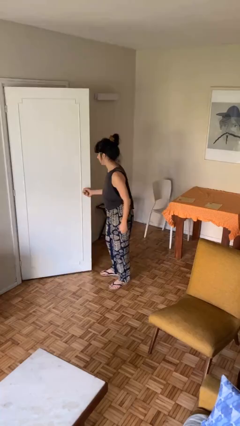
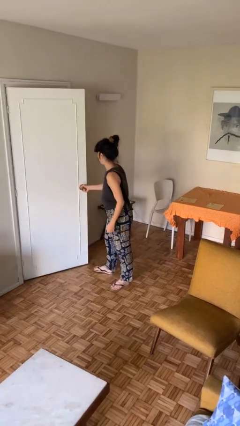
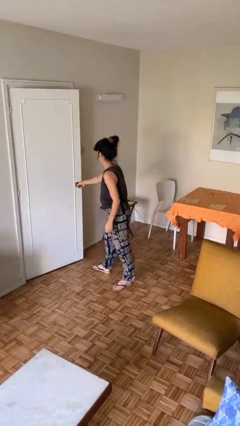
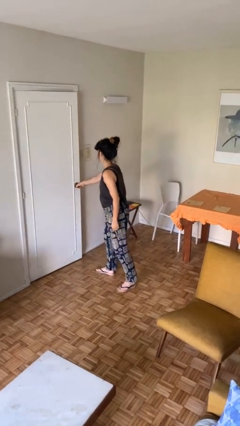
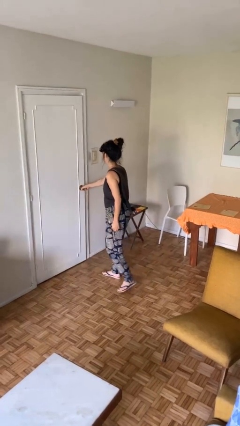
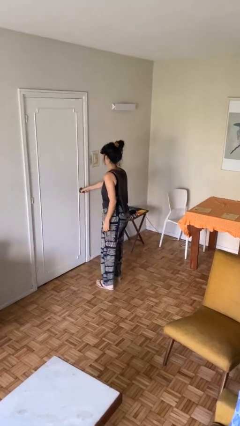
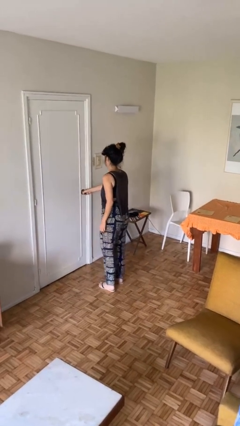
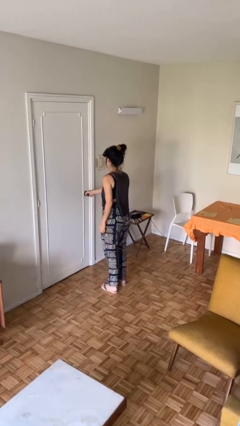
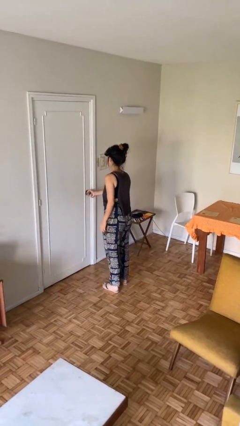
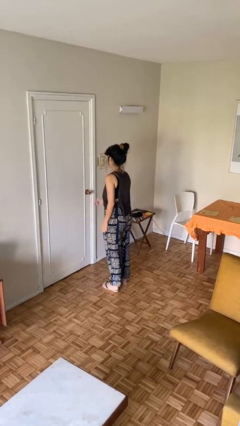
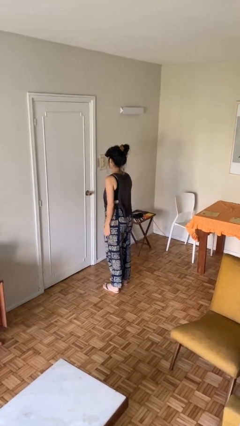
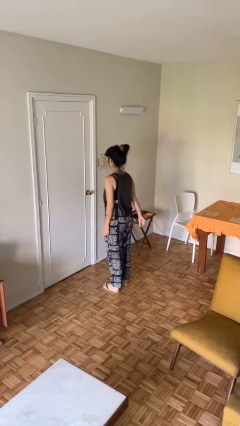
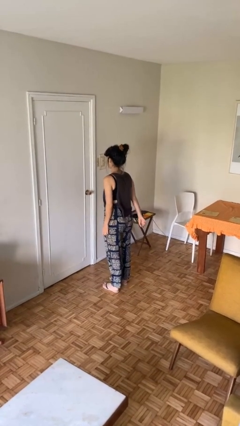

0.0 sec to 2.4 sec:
person closes facility door

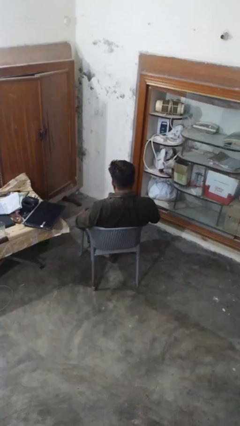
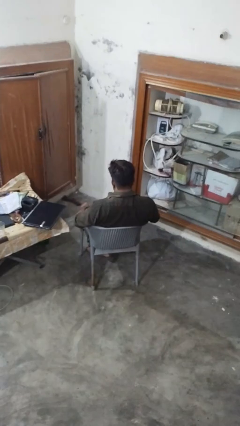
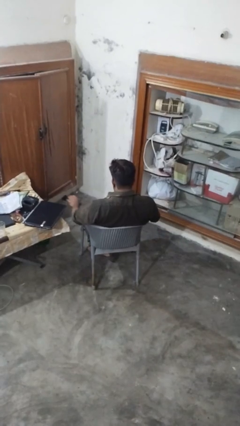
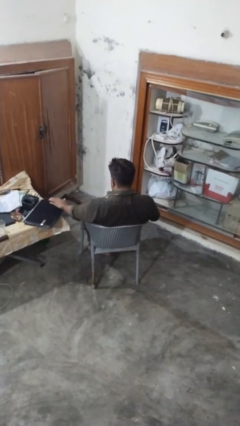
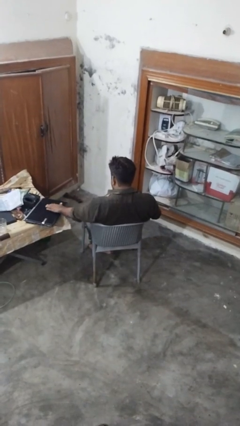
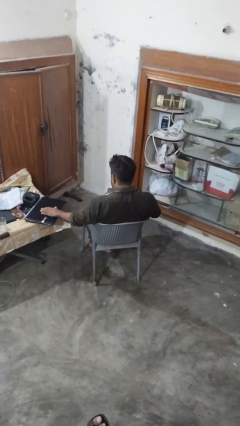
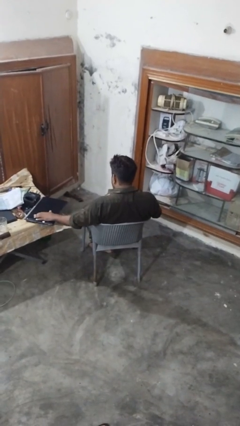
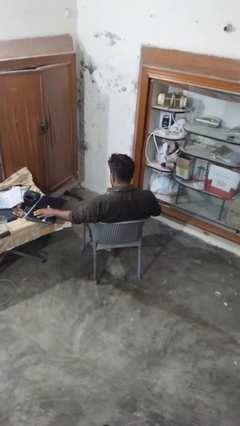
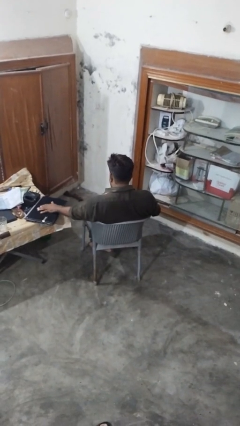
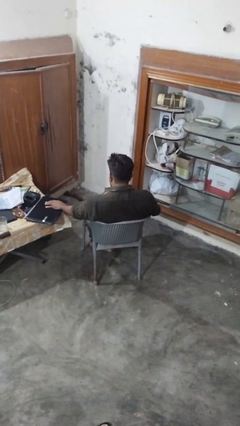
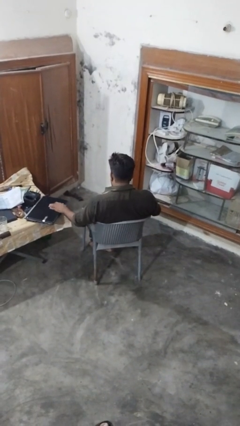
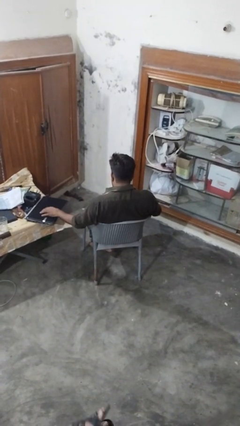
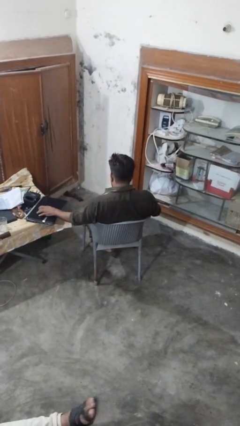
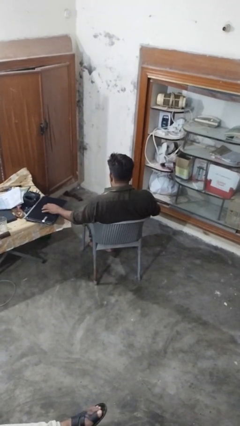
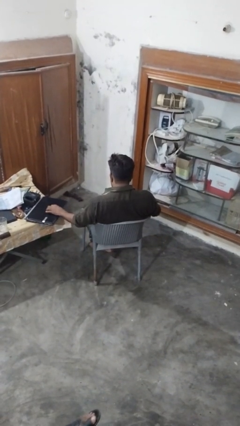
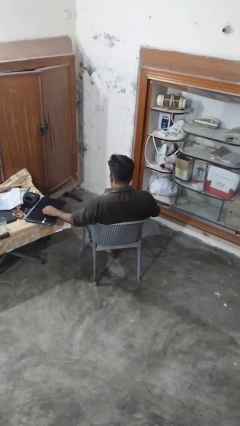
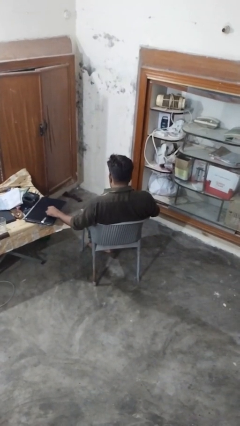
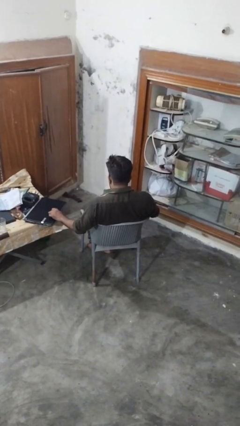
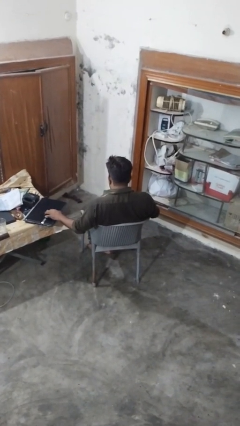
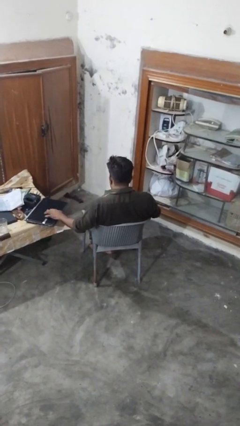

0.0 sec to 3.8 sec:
person waves hand over object

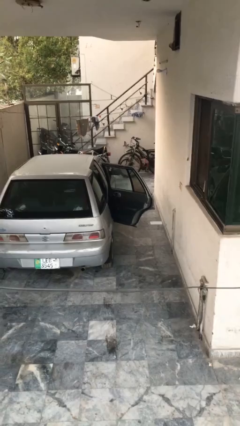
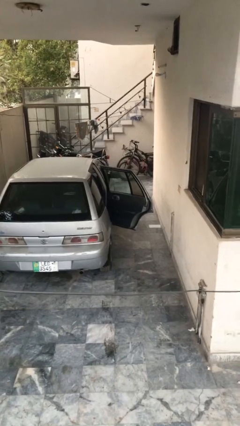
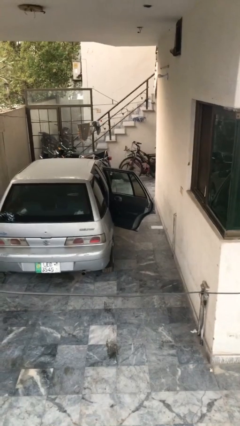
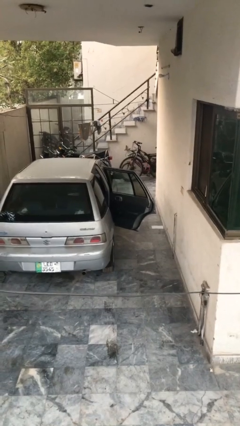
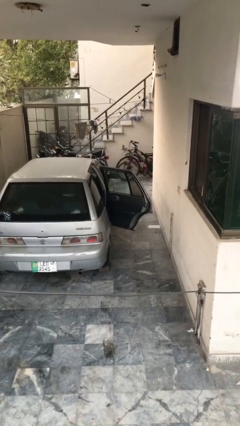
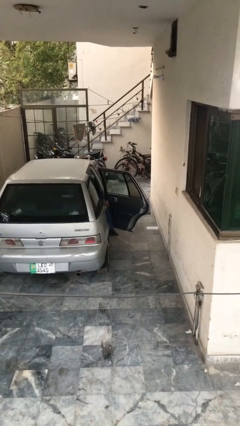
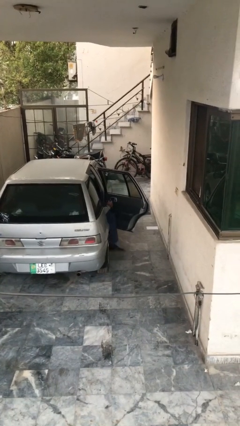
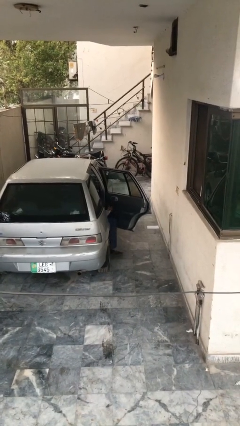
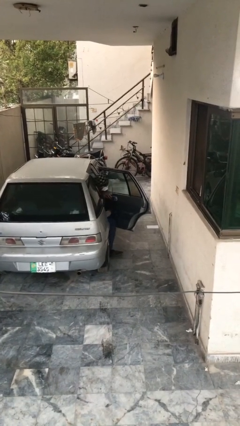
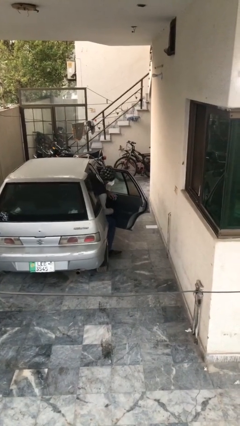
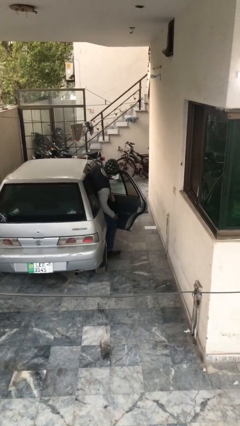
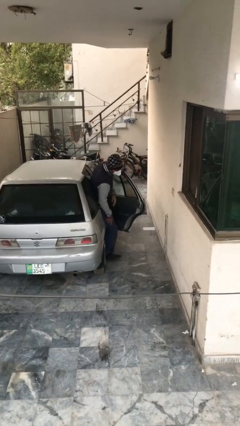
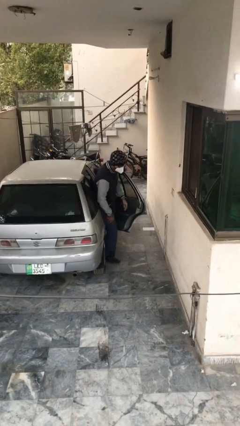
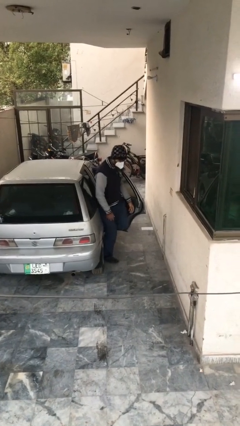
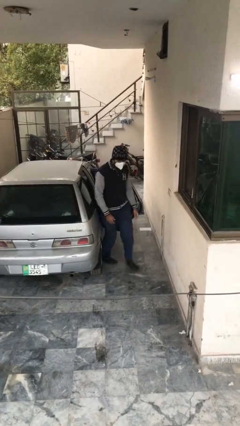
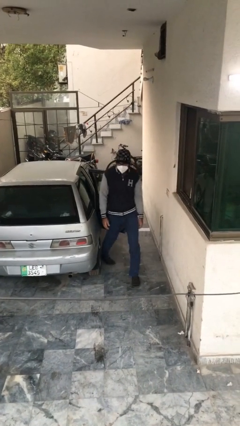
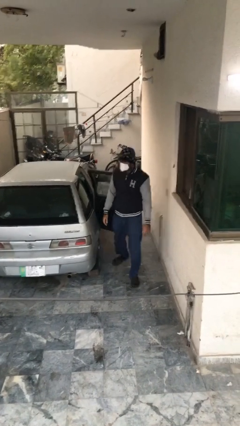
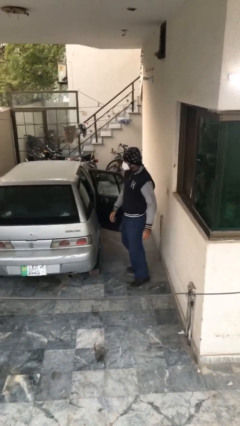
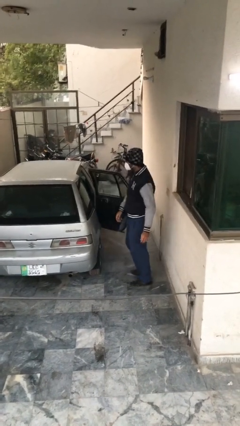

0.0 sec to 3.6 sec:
person exits car

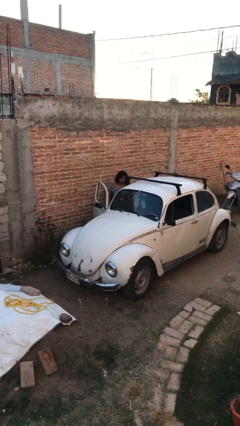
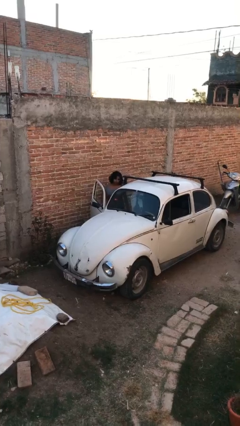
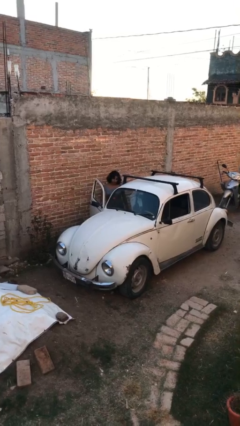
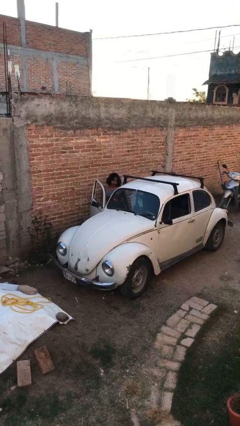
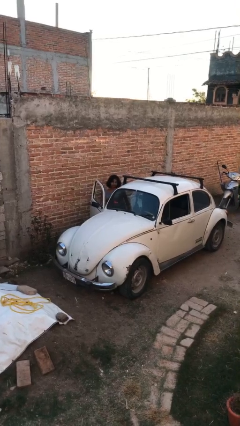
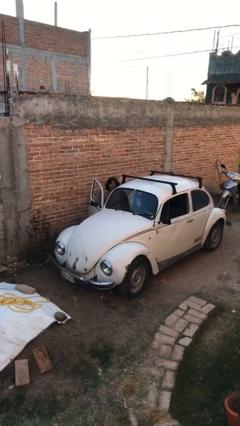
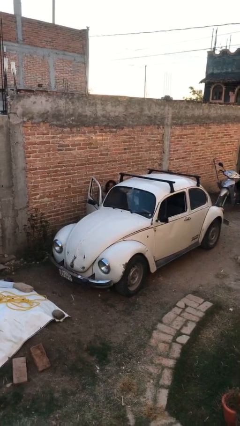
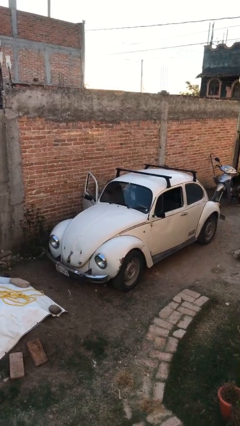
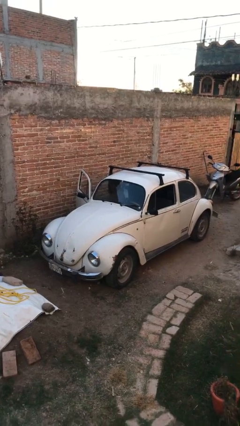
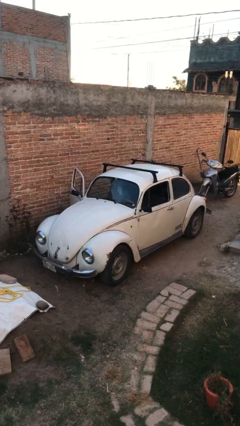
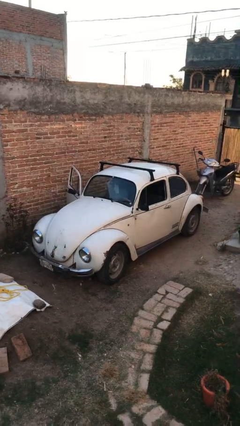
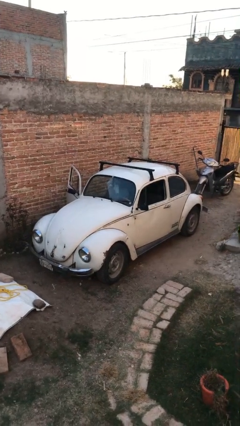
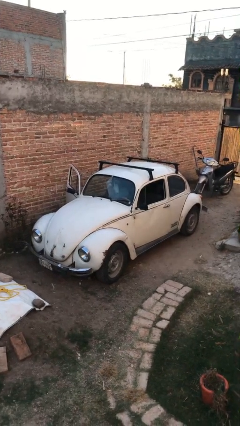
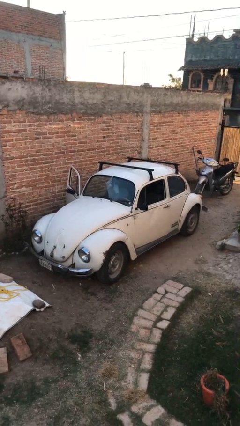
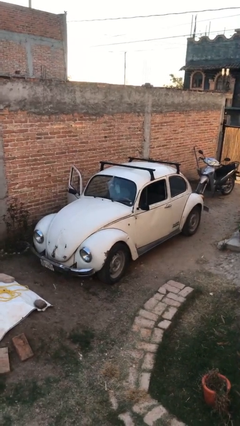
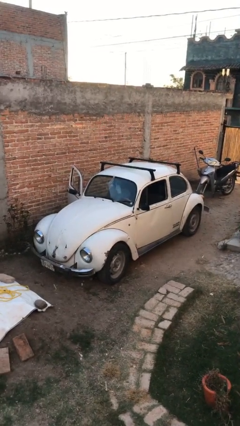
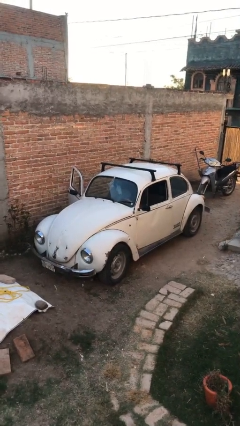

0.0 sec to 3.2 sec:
person enters car

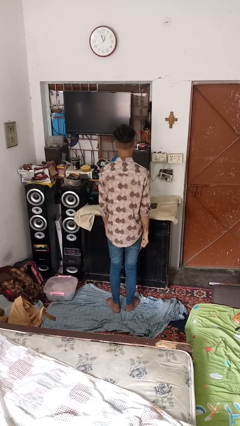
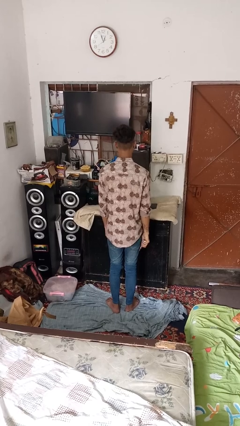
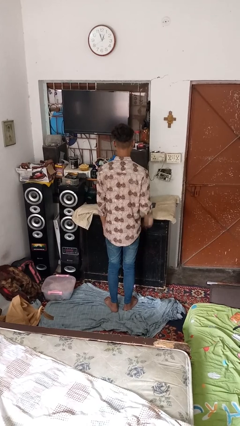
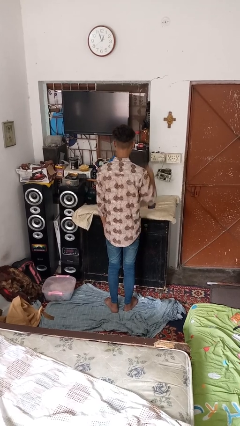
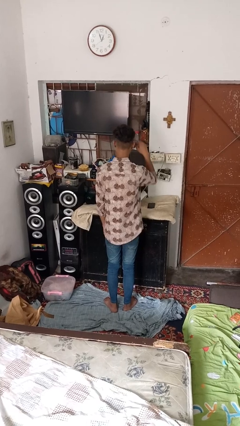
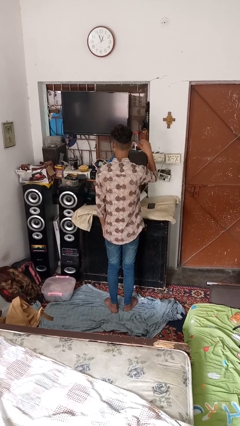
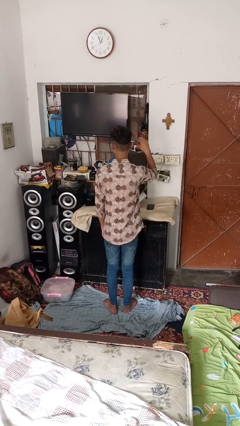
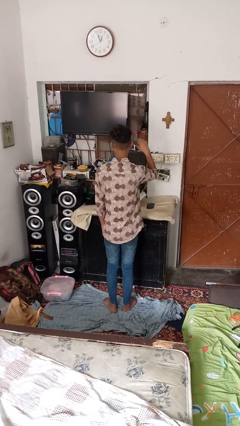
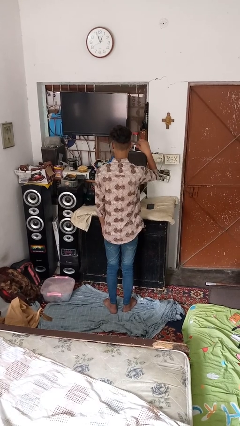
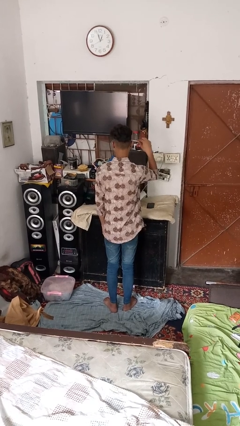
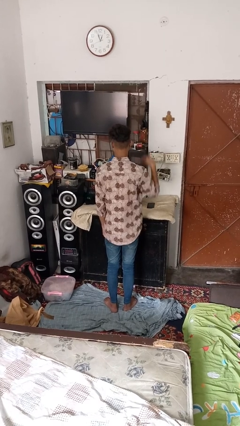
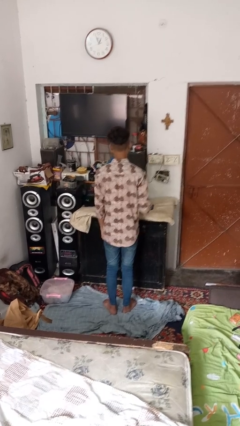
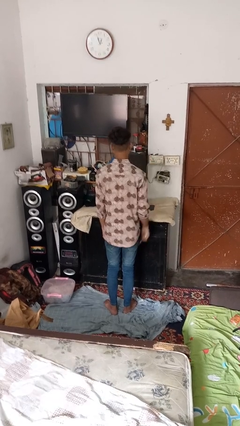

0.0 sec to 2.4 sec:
person applies eye makeup

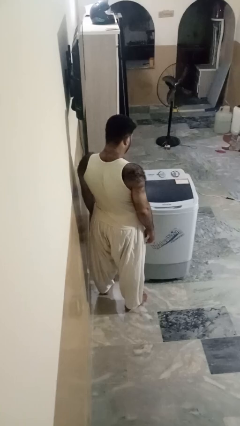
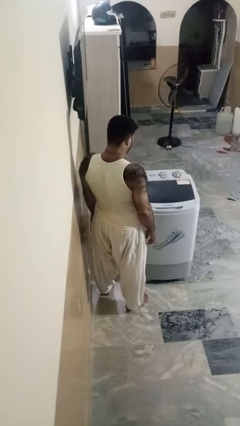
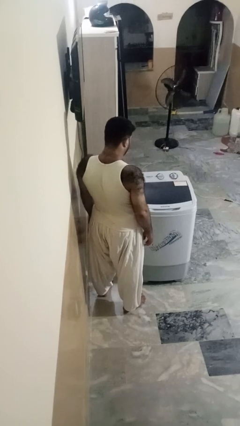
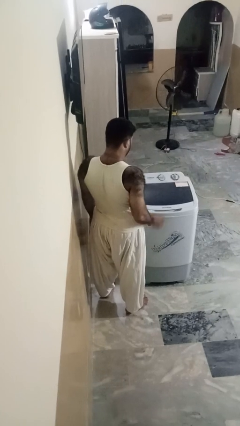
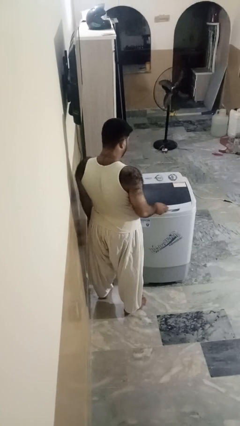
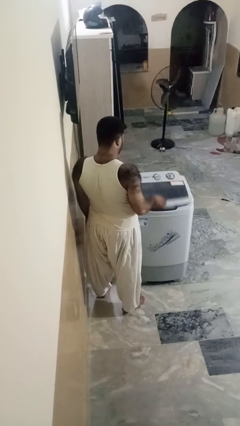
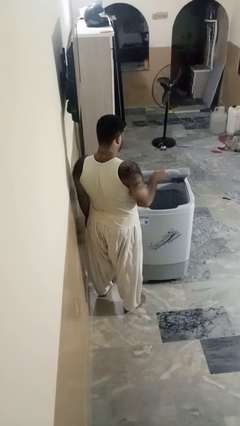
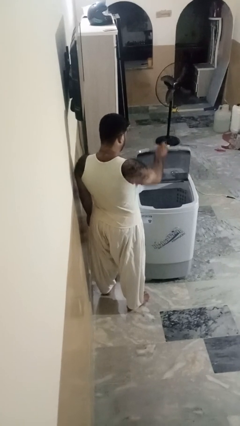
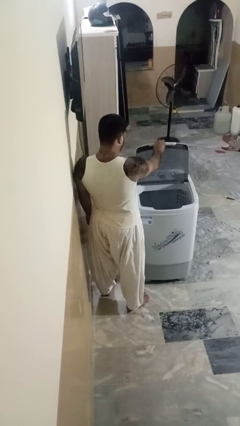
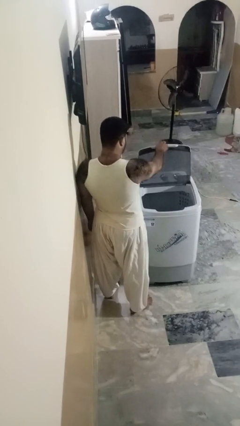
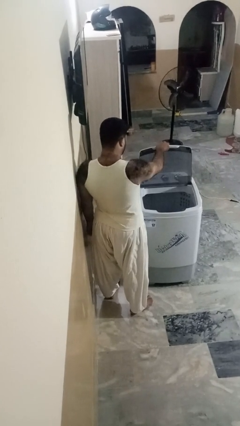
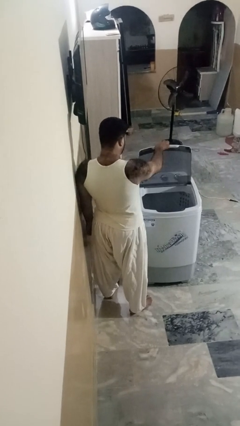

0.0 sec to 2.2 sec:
person opens clothes washer
